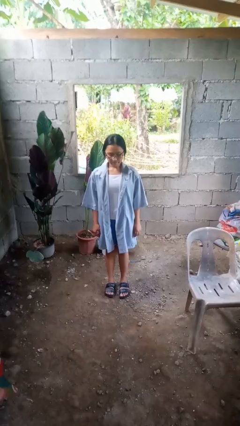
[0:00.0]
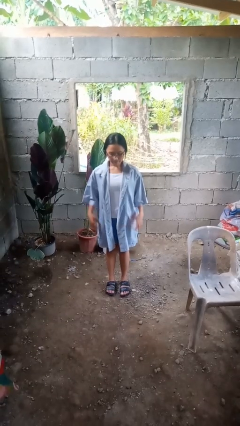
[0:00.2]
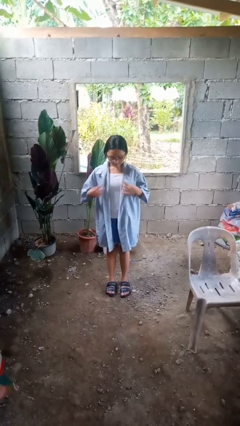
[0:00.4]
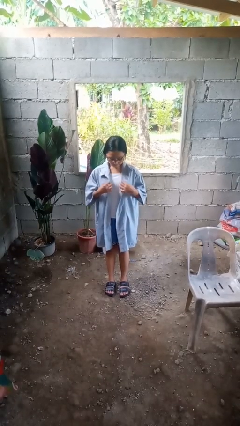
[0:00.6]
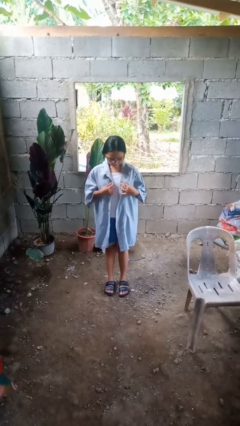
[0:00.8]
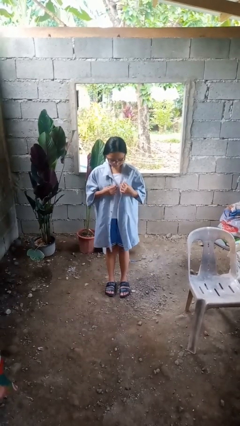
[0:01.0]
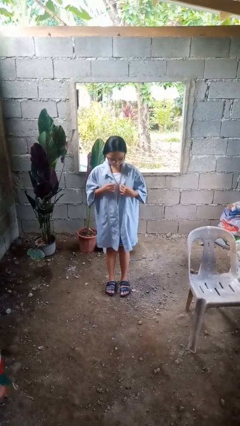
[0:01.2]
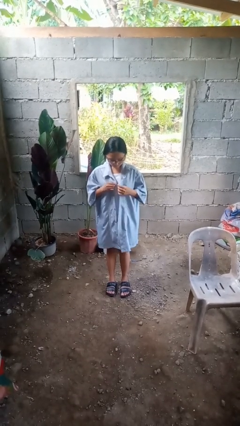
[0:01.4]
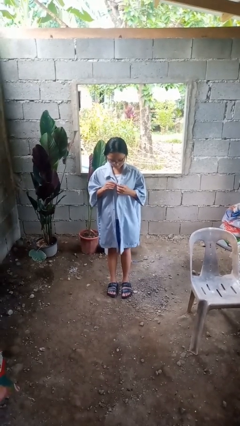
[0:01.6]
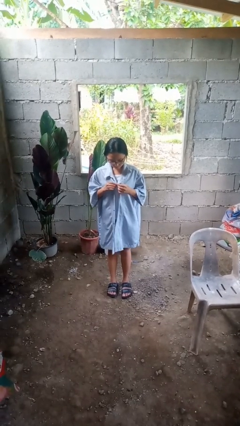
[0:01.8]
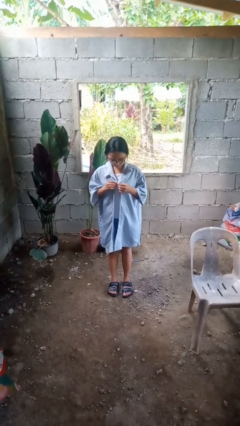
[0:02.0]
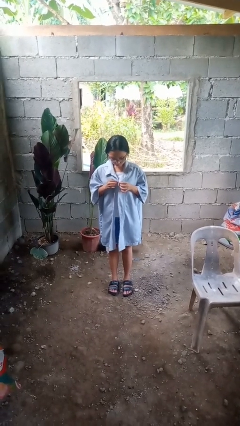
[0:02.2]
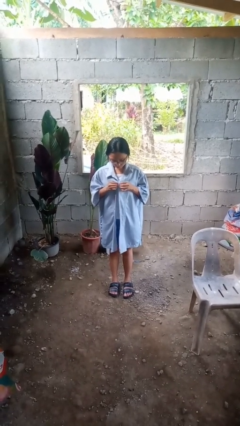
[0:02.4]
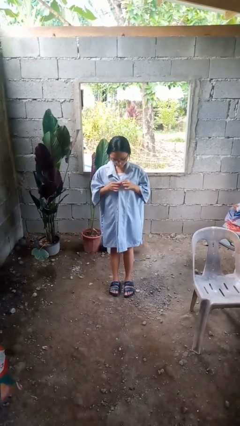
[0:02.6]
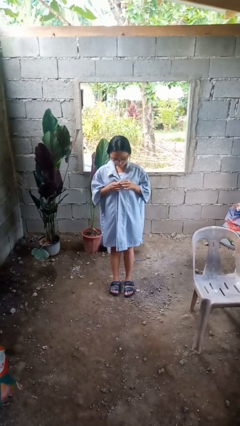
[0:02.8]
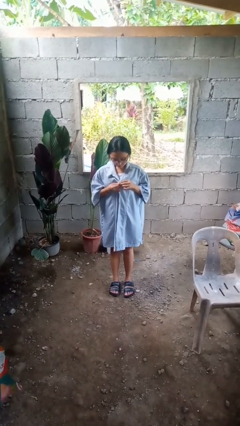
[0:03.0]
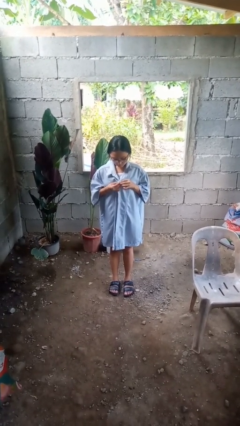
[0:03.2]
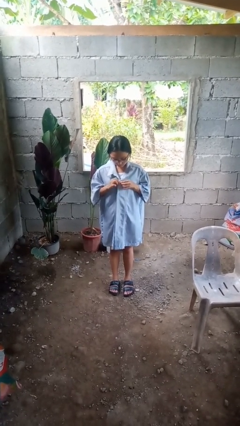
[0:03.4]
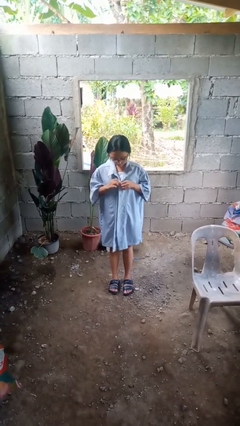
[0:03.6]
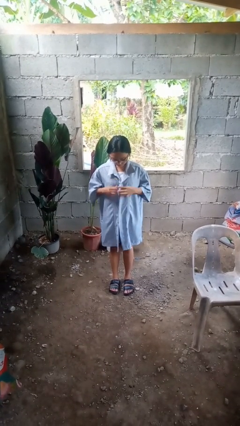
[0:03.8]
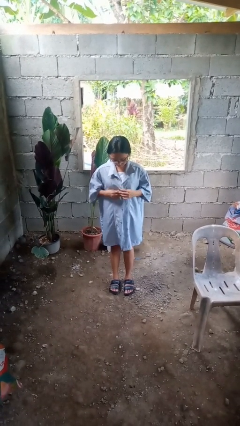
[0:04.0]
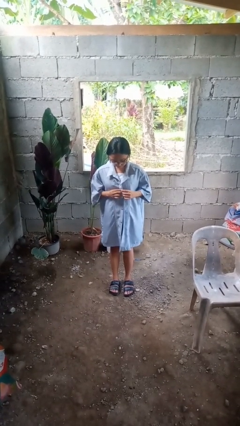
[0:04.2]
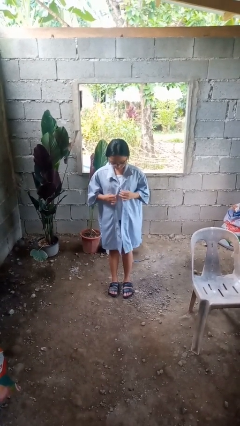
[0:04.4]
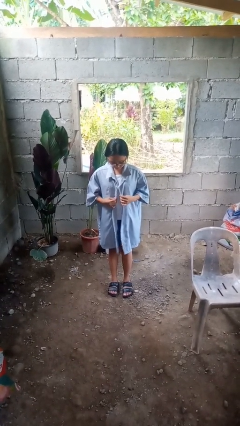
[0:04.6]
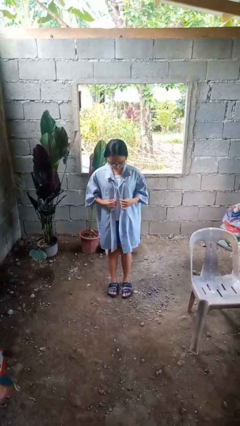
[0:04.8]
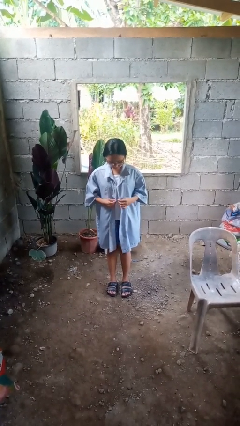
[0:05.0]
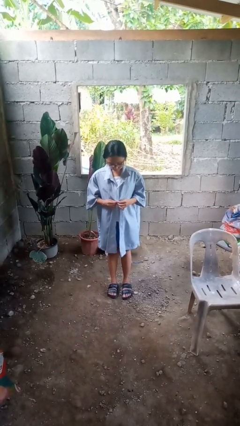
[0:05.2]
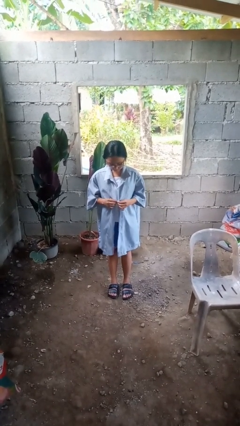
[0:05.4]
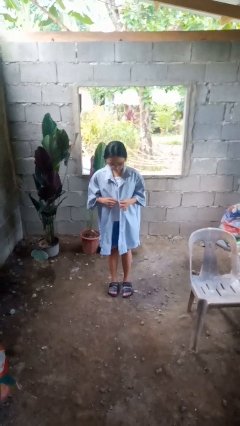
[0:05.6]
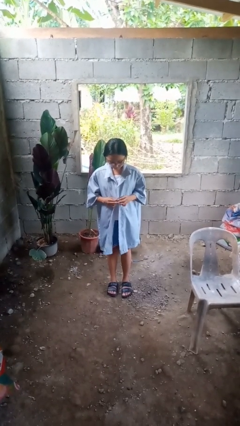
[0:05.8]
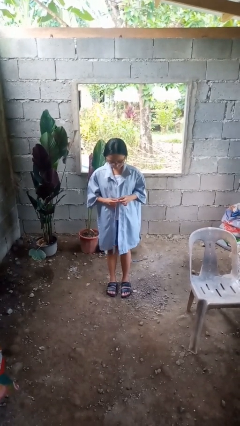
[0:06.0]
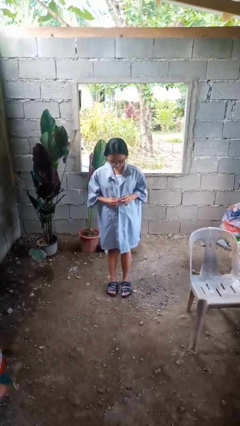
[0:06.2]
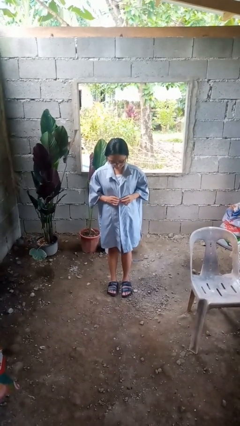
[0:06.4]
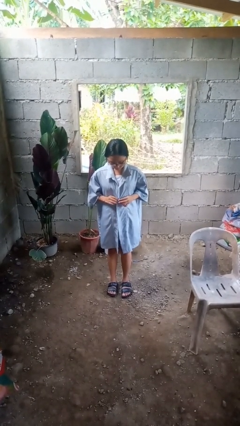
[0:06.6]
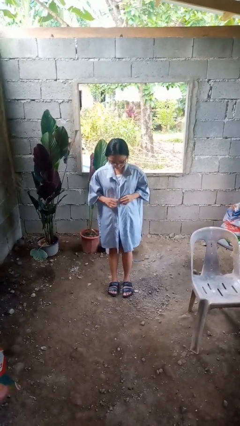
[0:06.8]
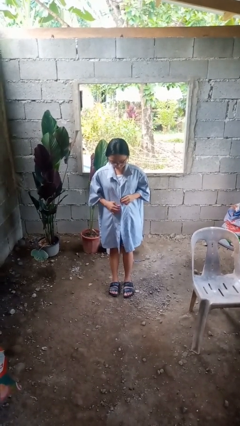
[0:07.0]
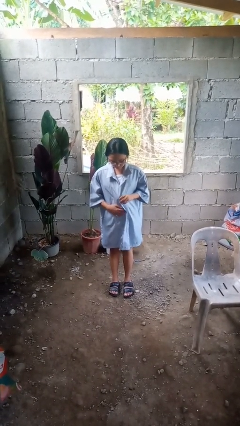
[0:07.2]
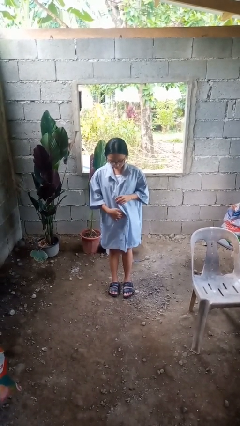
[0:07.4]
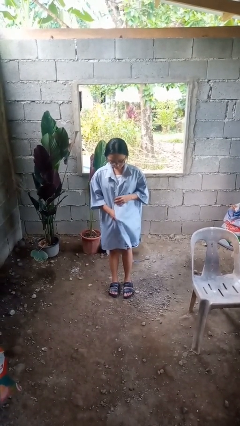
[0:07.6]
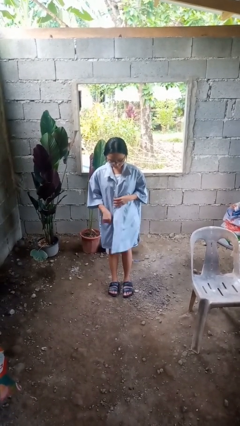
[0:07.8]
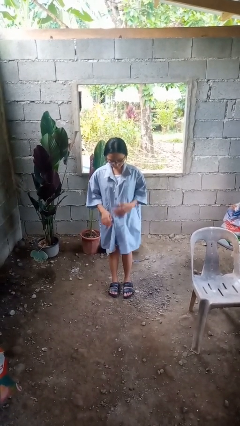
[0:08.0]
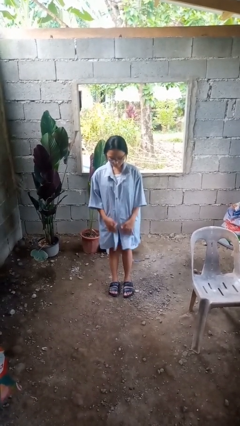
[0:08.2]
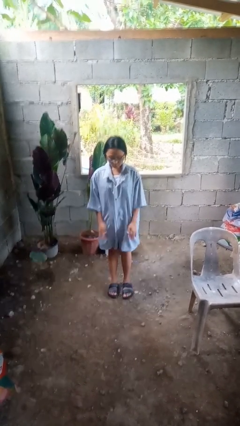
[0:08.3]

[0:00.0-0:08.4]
person buttons shirt

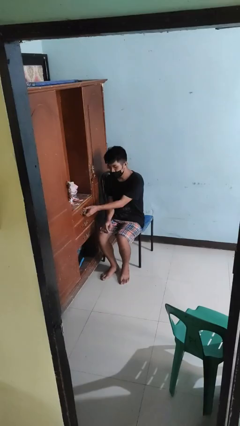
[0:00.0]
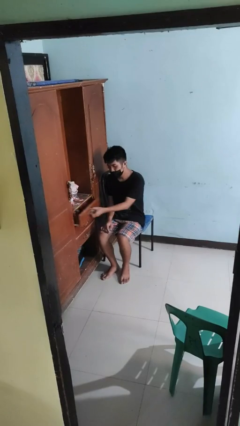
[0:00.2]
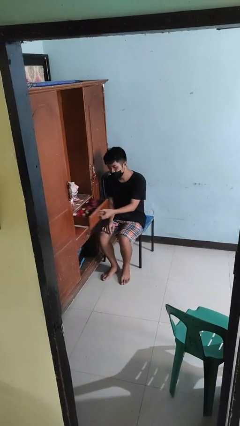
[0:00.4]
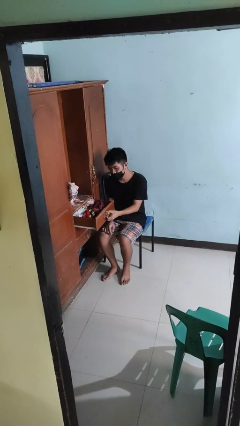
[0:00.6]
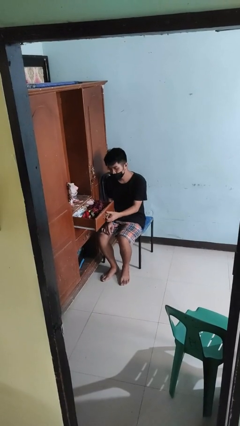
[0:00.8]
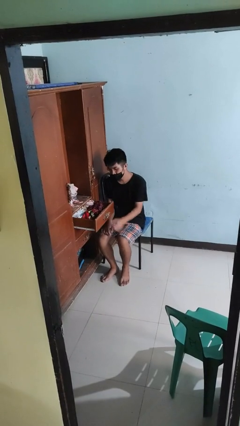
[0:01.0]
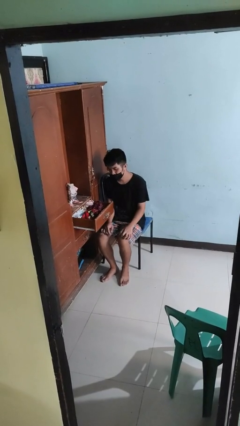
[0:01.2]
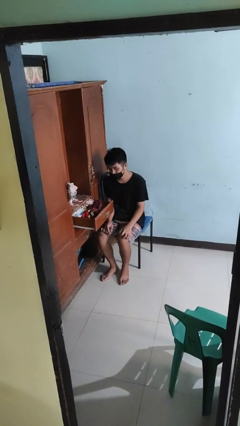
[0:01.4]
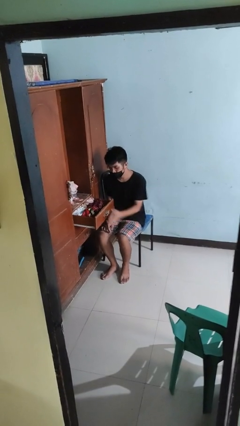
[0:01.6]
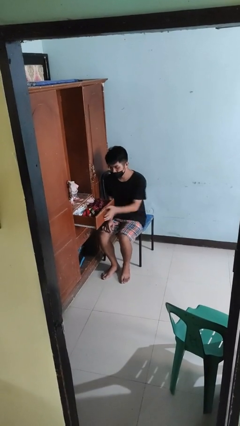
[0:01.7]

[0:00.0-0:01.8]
person opens dresser drawer

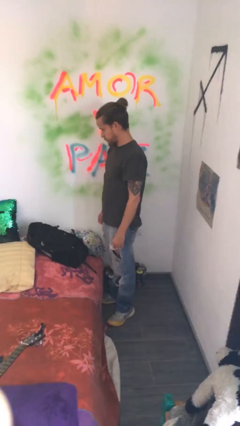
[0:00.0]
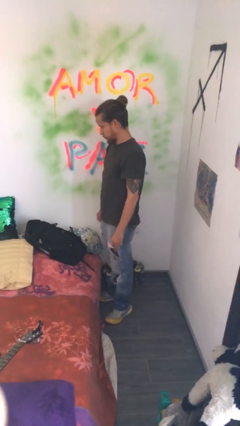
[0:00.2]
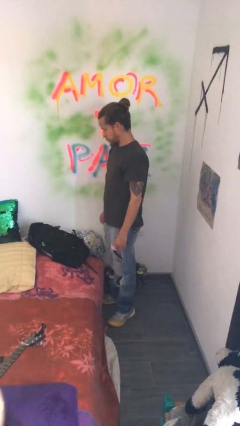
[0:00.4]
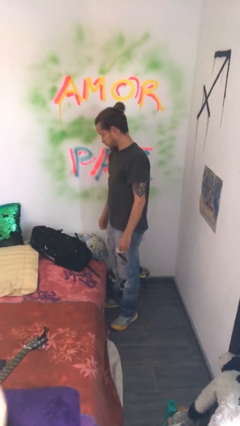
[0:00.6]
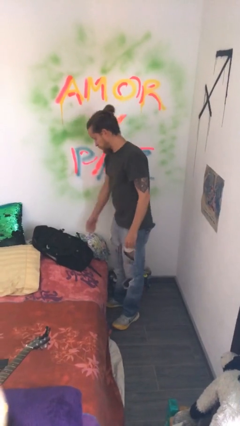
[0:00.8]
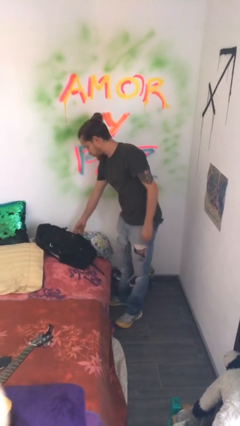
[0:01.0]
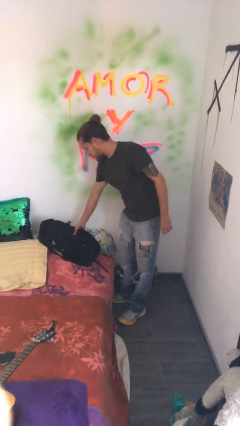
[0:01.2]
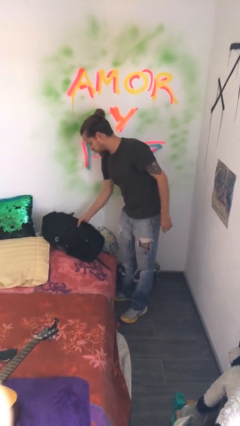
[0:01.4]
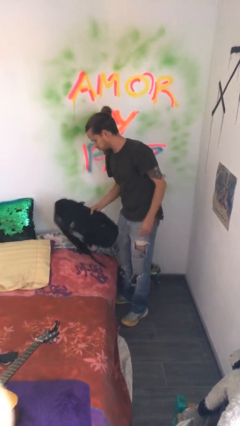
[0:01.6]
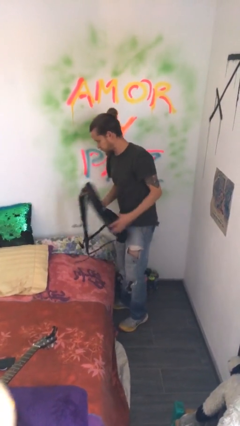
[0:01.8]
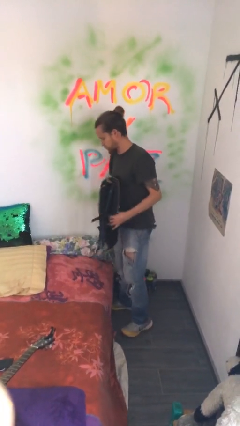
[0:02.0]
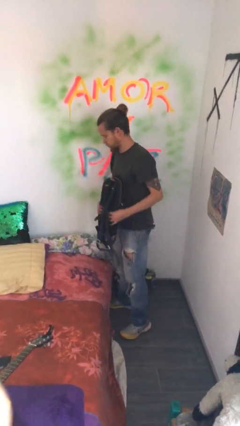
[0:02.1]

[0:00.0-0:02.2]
person picks up object from bed

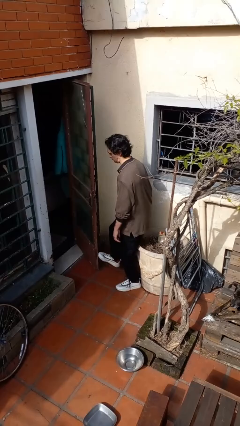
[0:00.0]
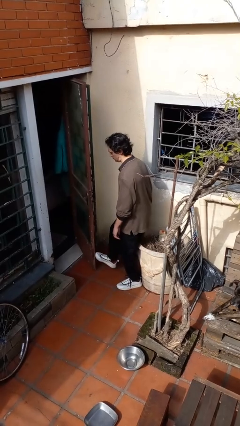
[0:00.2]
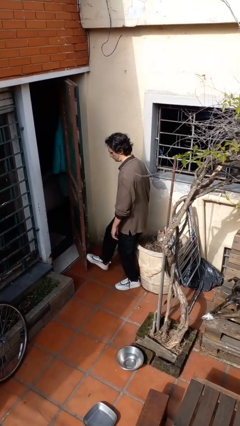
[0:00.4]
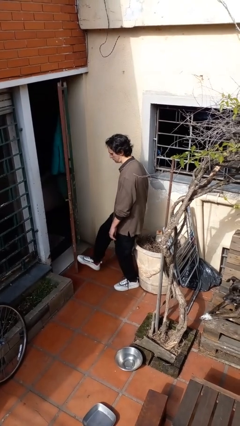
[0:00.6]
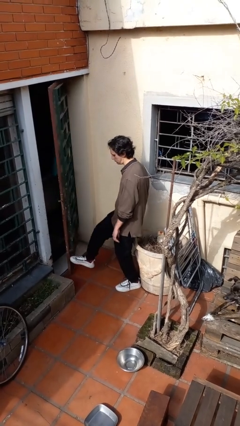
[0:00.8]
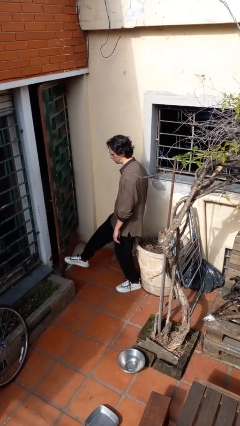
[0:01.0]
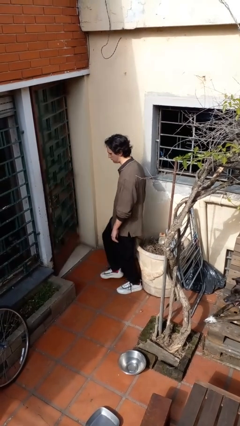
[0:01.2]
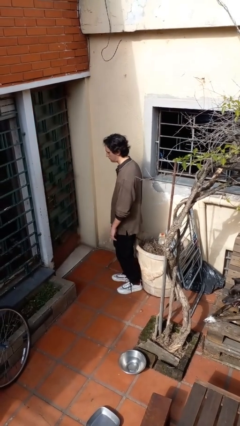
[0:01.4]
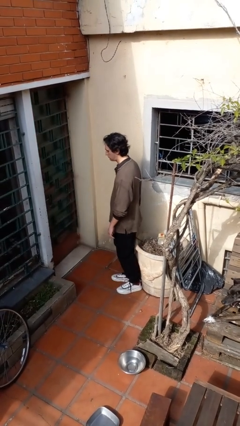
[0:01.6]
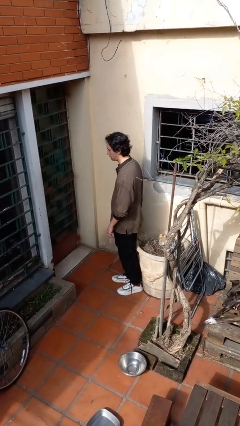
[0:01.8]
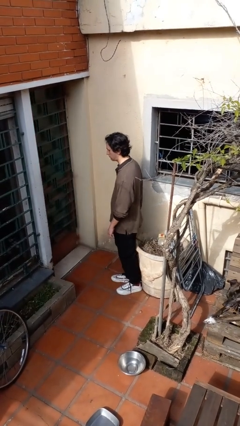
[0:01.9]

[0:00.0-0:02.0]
person closes door with foot

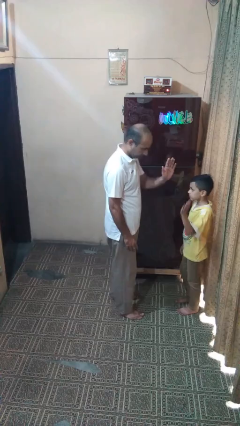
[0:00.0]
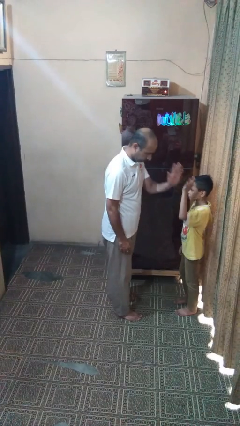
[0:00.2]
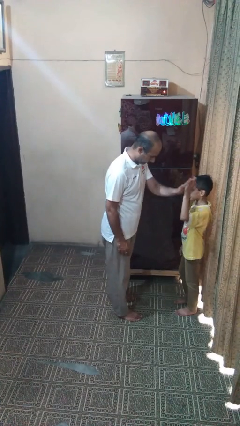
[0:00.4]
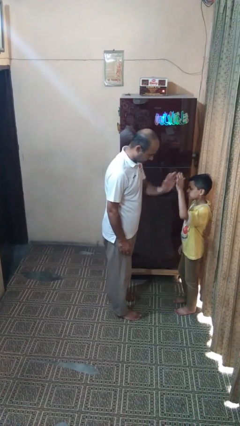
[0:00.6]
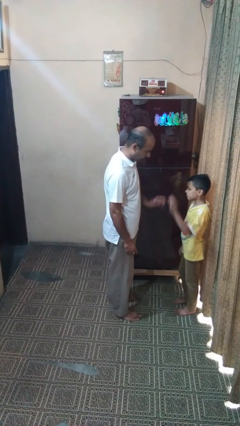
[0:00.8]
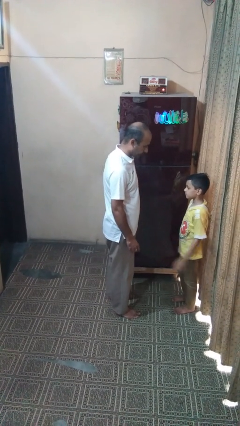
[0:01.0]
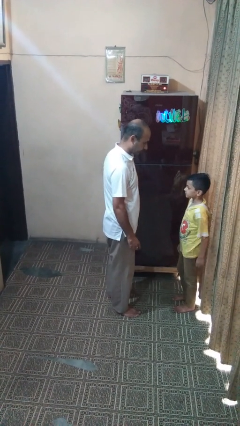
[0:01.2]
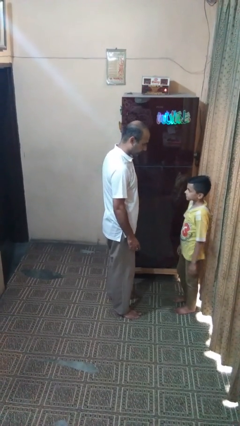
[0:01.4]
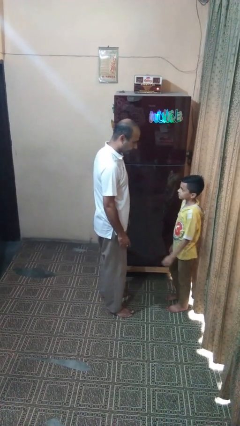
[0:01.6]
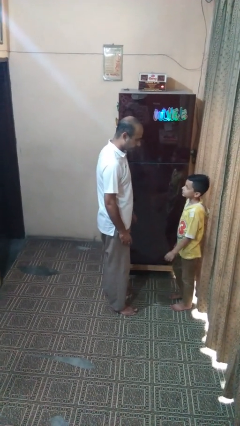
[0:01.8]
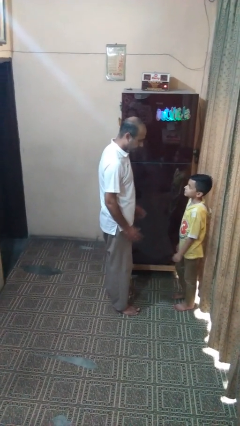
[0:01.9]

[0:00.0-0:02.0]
person highfives hand

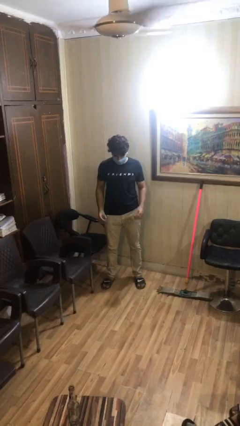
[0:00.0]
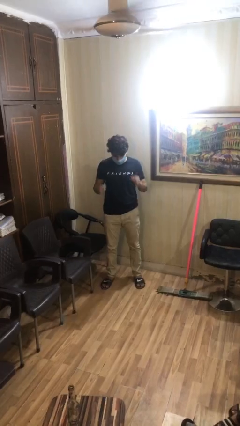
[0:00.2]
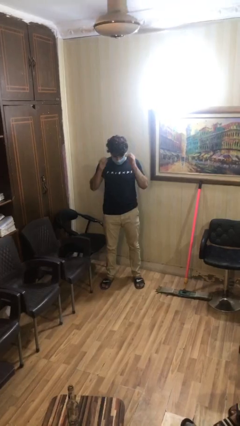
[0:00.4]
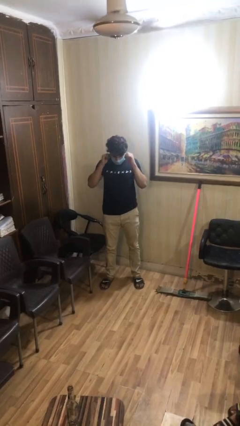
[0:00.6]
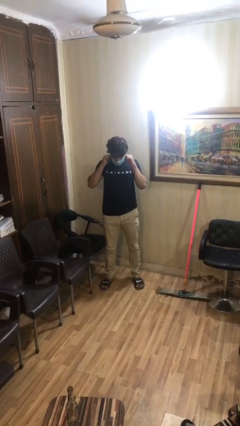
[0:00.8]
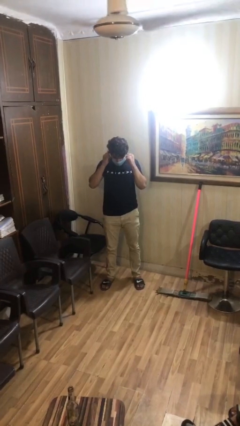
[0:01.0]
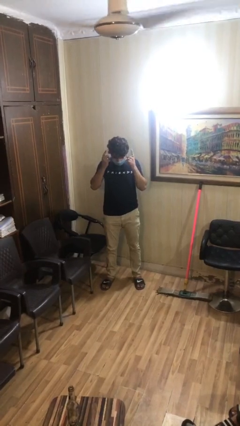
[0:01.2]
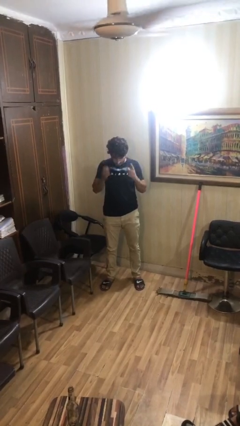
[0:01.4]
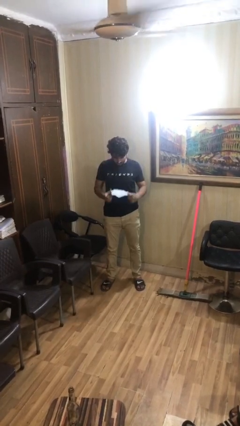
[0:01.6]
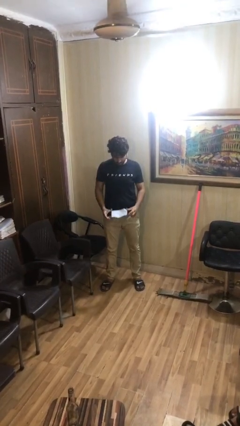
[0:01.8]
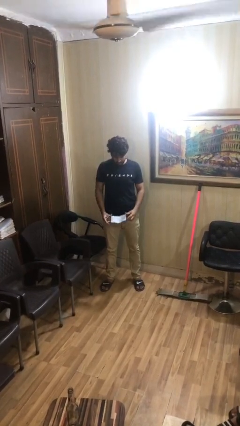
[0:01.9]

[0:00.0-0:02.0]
person takes off facemask
